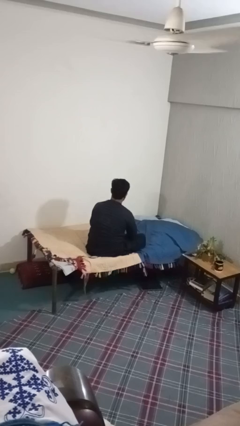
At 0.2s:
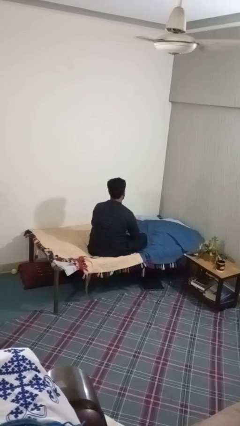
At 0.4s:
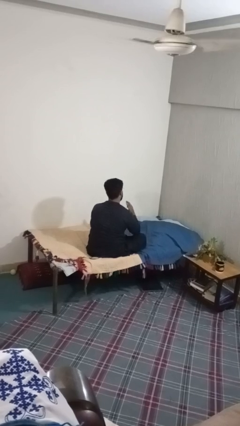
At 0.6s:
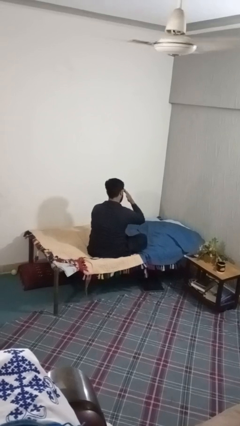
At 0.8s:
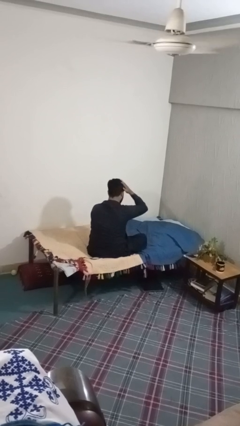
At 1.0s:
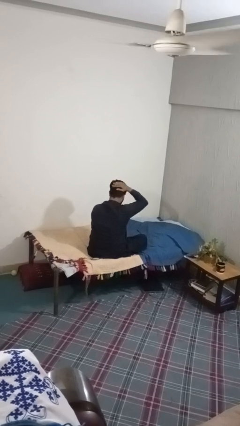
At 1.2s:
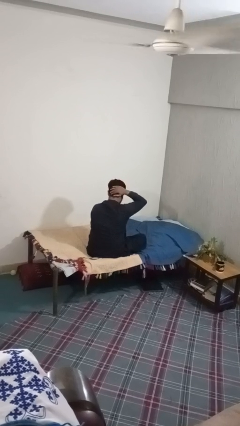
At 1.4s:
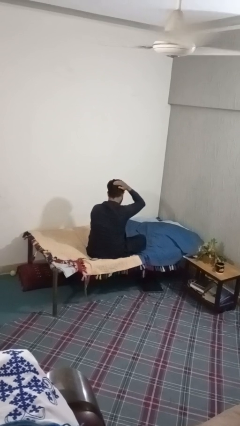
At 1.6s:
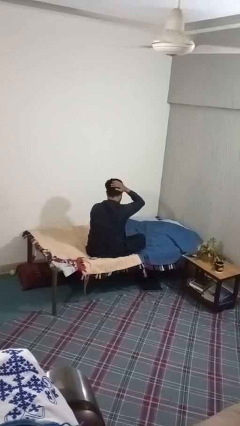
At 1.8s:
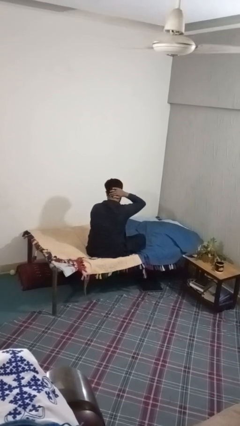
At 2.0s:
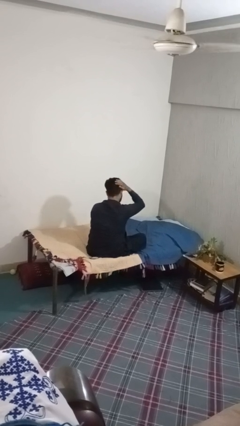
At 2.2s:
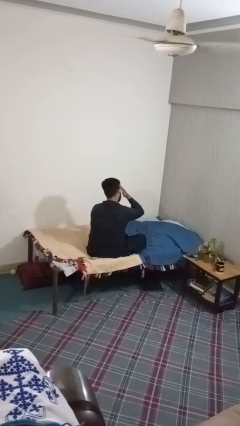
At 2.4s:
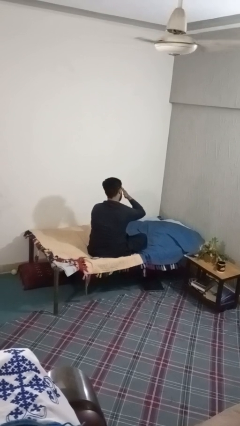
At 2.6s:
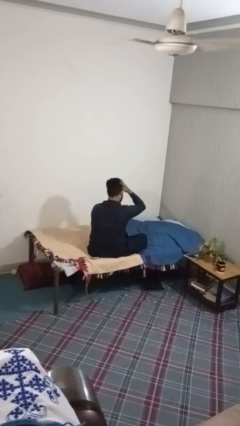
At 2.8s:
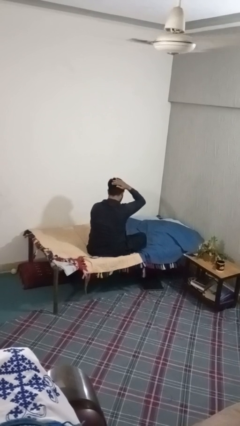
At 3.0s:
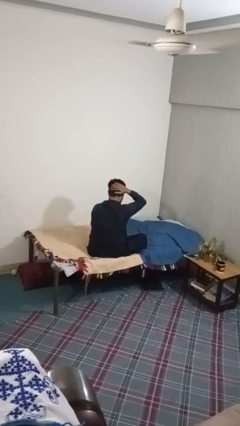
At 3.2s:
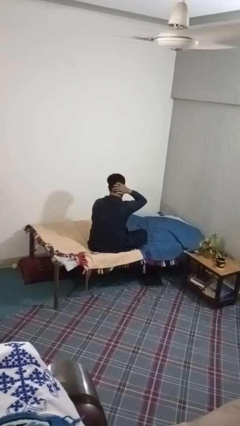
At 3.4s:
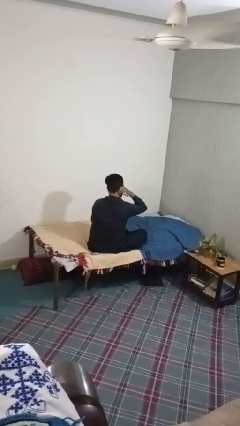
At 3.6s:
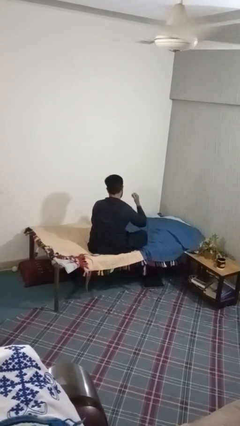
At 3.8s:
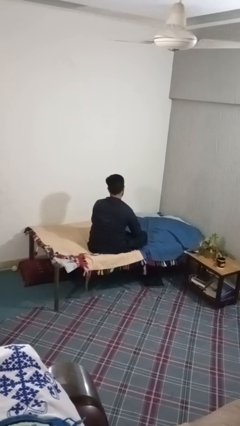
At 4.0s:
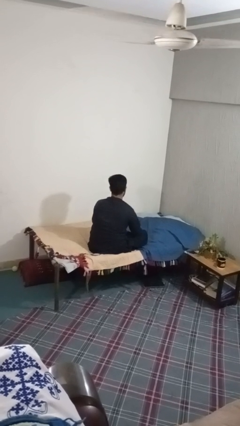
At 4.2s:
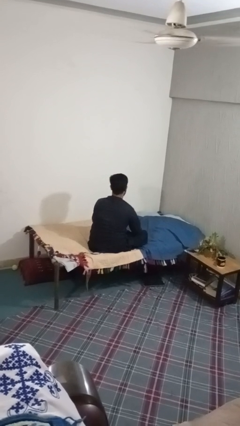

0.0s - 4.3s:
person strokes hair

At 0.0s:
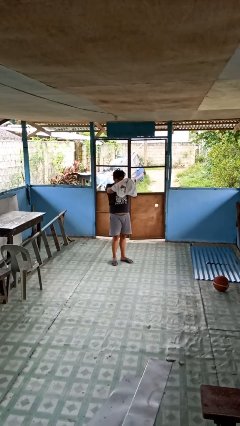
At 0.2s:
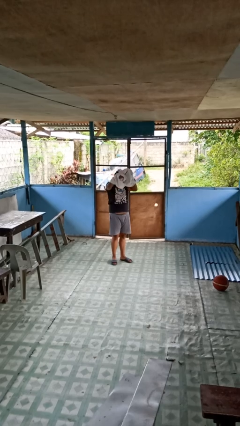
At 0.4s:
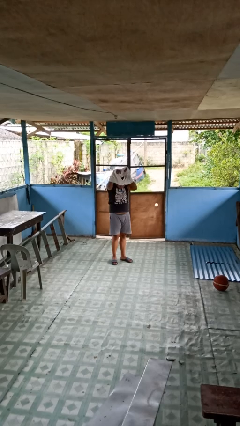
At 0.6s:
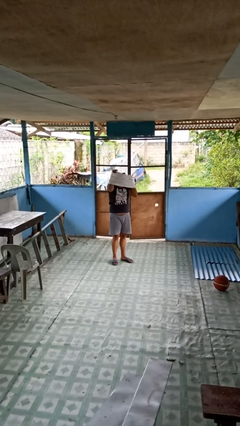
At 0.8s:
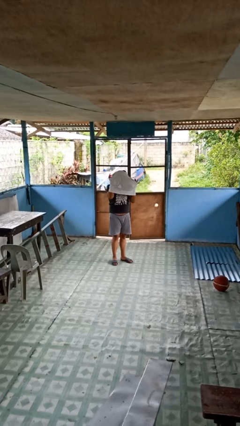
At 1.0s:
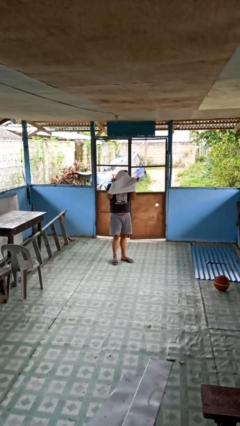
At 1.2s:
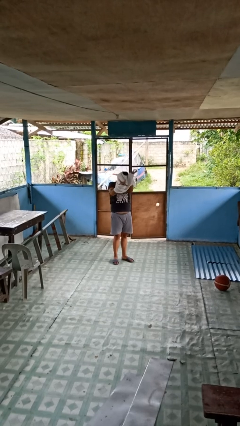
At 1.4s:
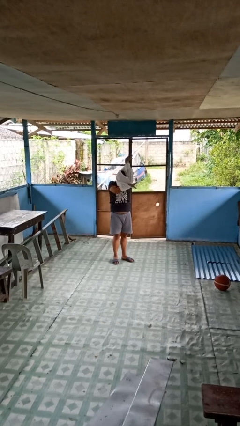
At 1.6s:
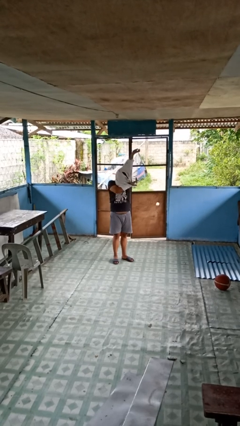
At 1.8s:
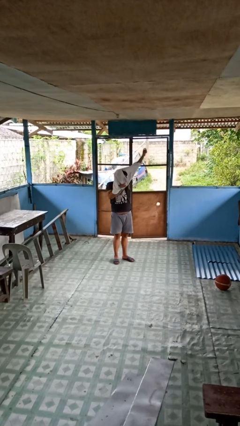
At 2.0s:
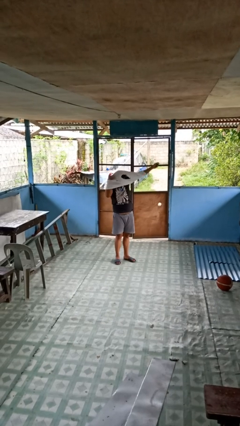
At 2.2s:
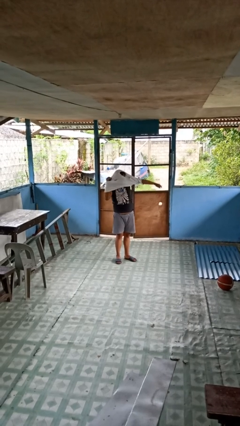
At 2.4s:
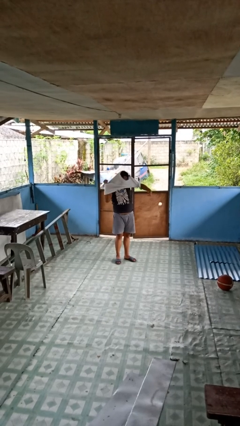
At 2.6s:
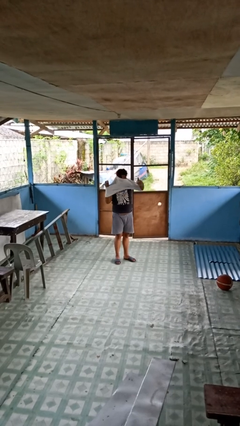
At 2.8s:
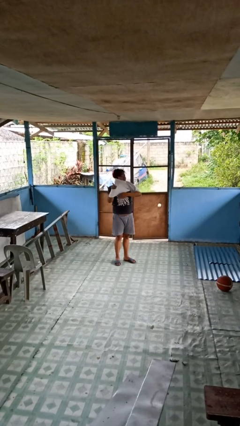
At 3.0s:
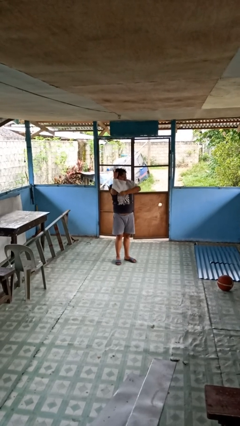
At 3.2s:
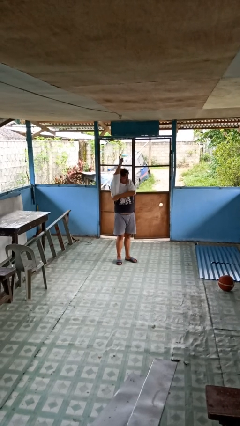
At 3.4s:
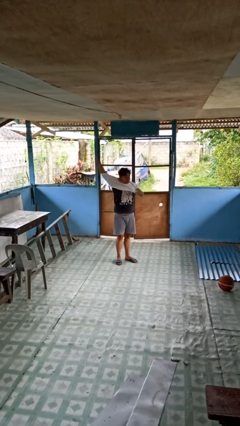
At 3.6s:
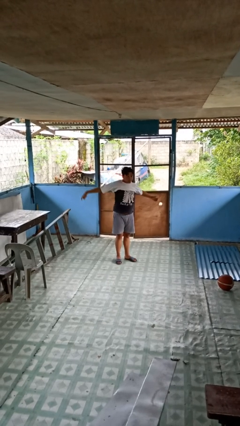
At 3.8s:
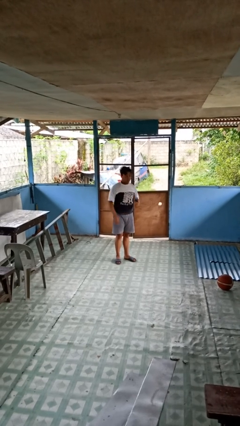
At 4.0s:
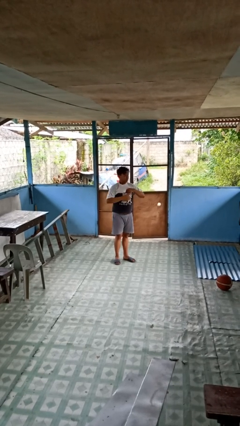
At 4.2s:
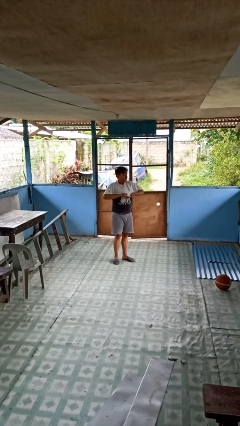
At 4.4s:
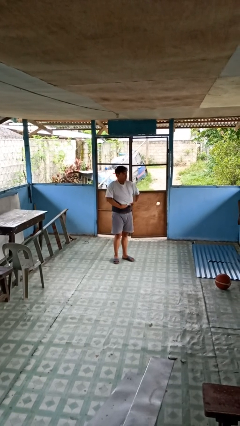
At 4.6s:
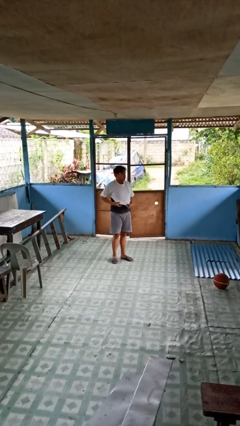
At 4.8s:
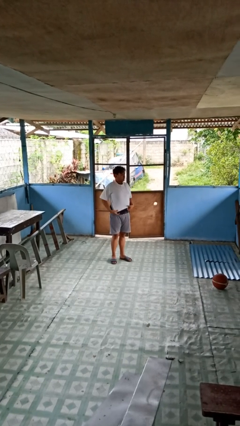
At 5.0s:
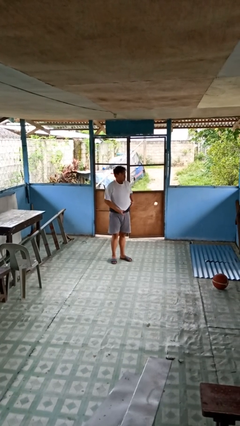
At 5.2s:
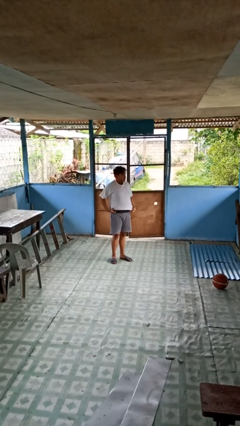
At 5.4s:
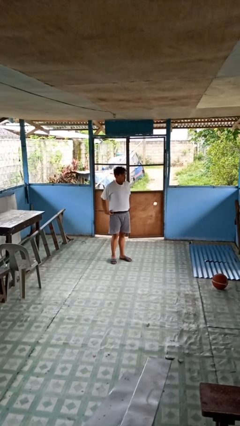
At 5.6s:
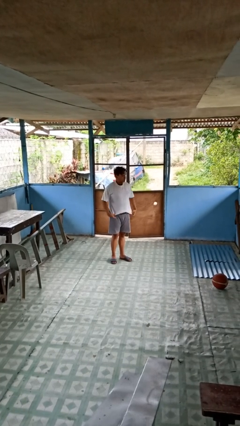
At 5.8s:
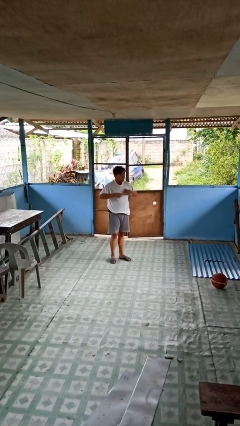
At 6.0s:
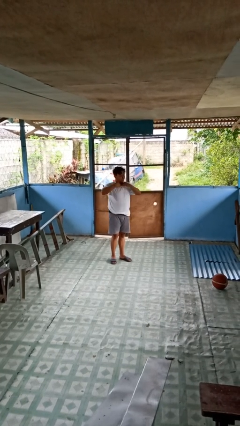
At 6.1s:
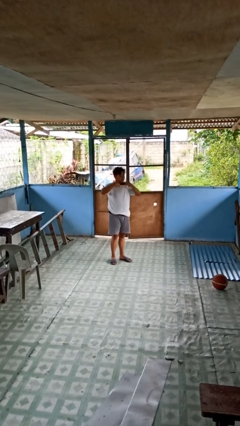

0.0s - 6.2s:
person puts on shirt

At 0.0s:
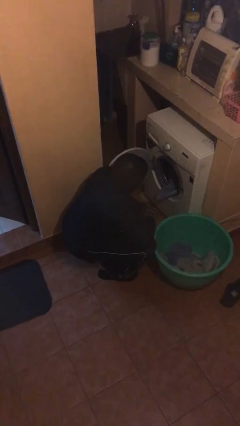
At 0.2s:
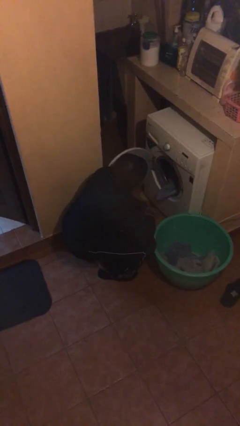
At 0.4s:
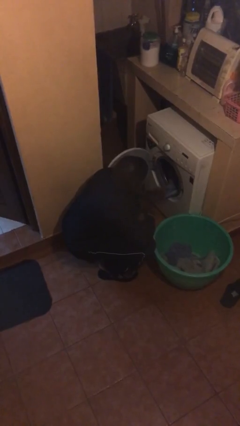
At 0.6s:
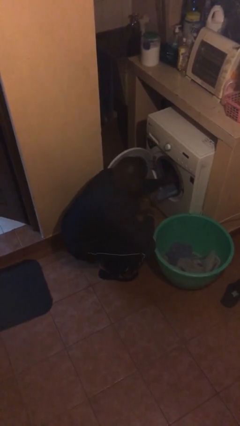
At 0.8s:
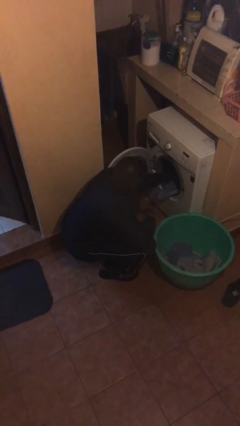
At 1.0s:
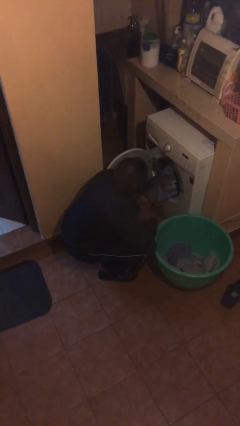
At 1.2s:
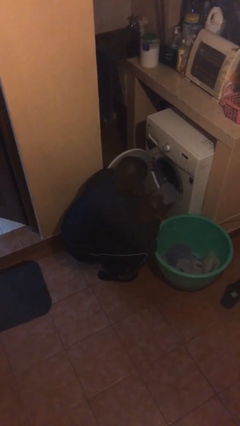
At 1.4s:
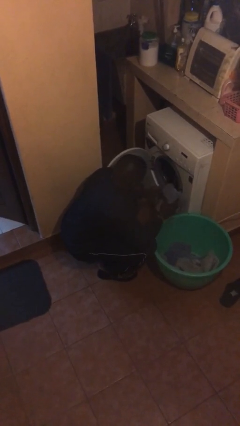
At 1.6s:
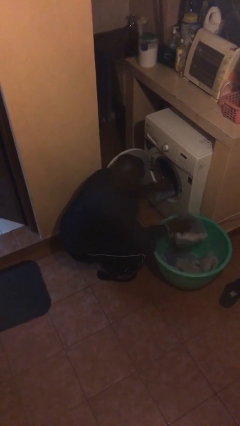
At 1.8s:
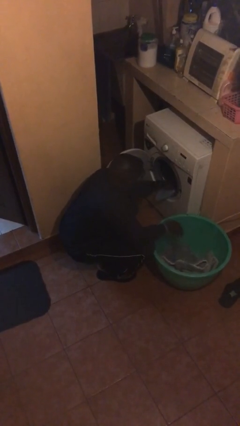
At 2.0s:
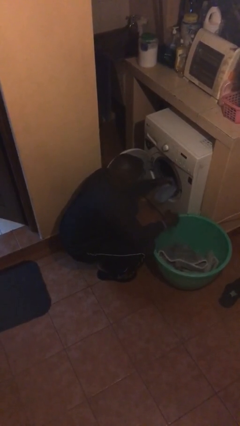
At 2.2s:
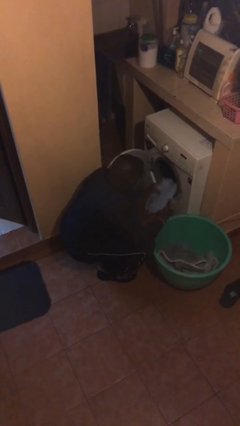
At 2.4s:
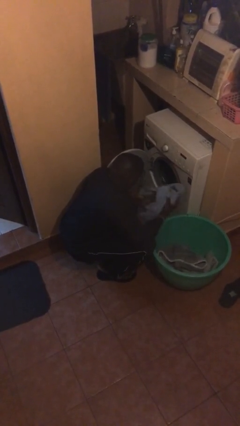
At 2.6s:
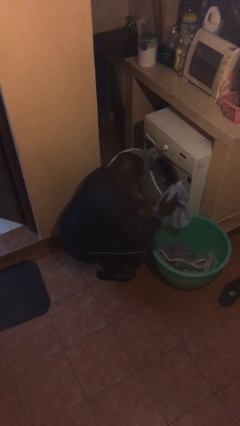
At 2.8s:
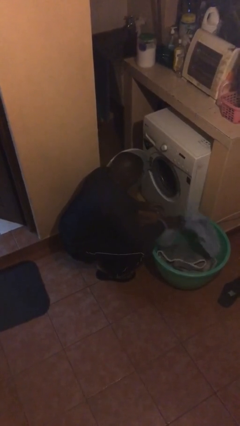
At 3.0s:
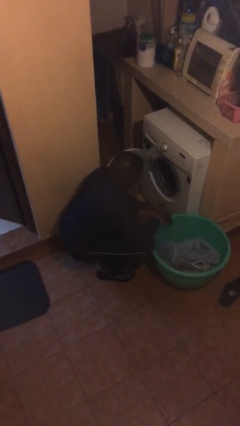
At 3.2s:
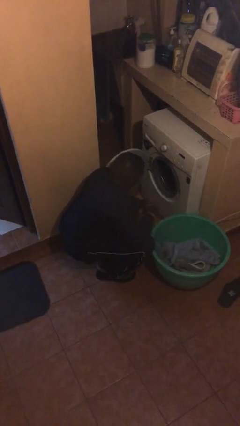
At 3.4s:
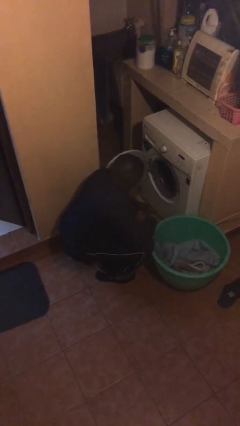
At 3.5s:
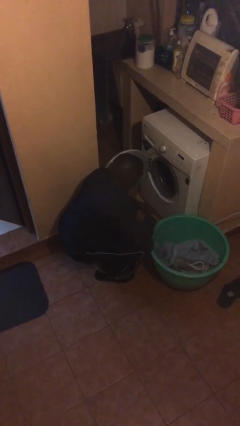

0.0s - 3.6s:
person loads clotheswasher

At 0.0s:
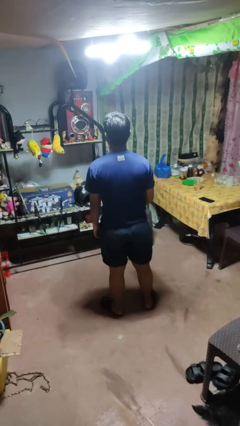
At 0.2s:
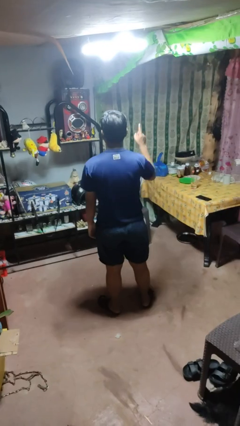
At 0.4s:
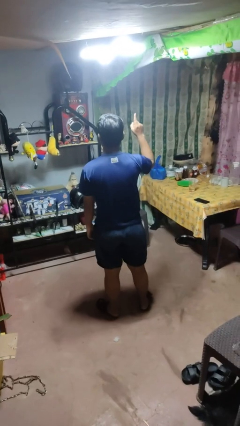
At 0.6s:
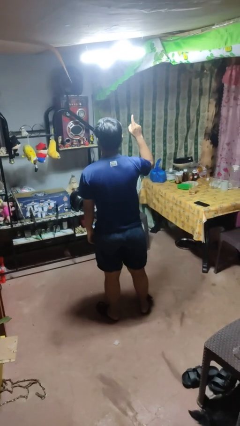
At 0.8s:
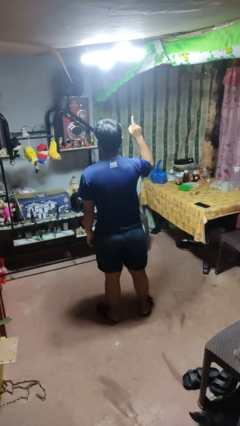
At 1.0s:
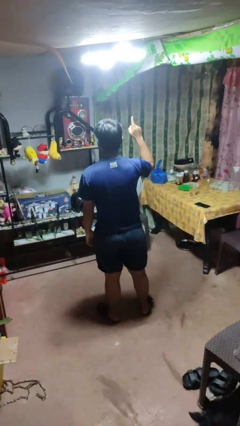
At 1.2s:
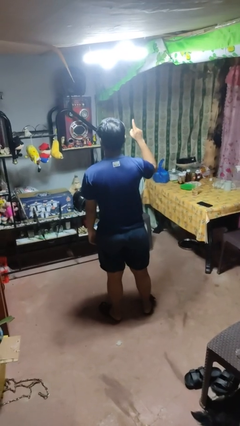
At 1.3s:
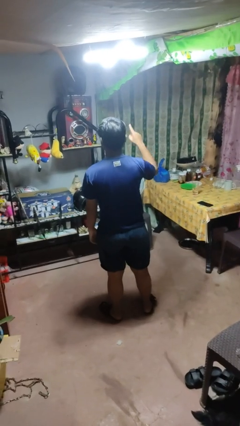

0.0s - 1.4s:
person gestures number one

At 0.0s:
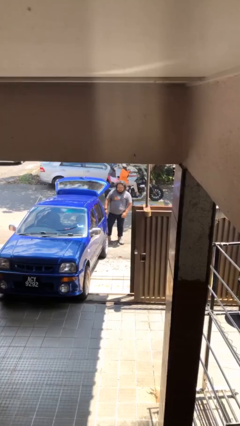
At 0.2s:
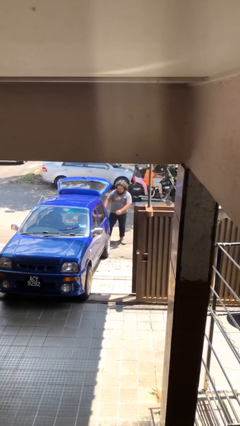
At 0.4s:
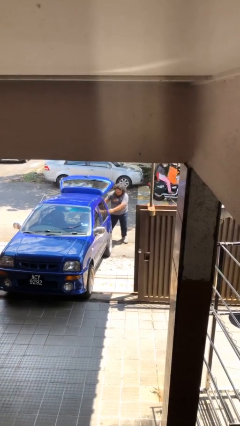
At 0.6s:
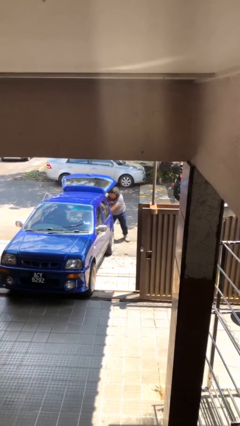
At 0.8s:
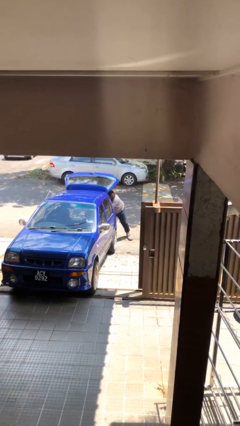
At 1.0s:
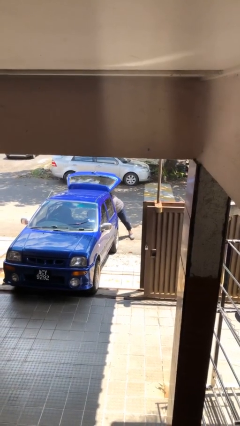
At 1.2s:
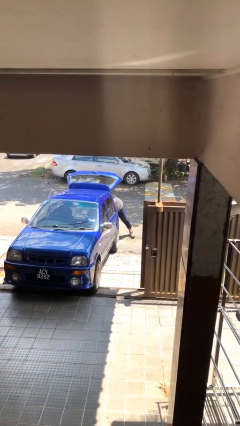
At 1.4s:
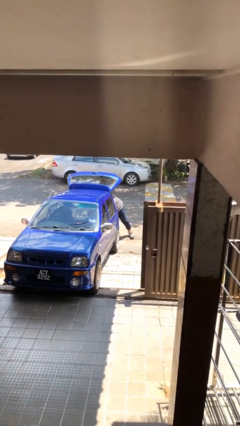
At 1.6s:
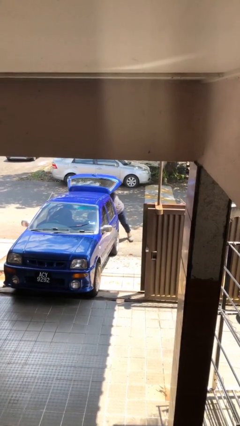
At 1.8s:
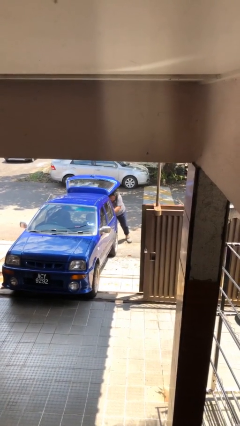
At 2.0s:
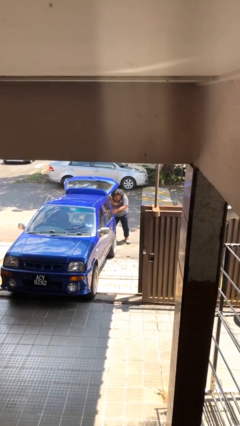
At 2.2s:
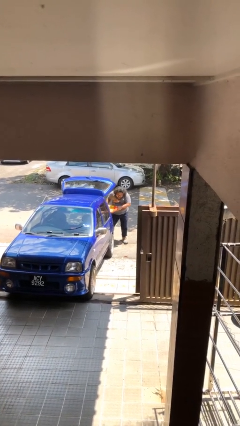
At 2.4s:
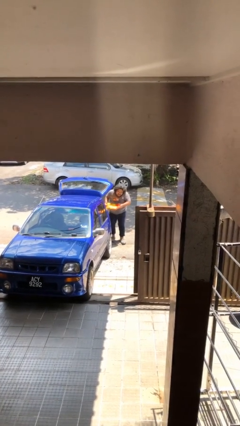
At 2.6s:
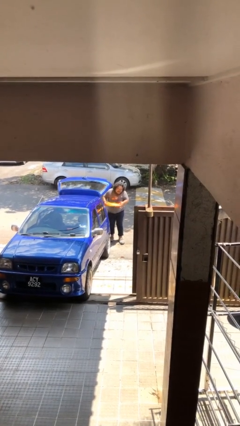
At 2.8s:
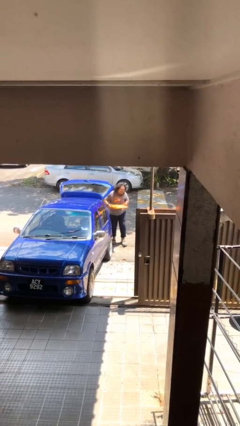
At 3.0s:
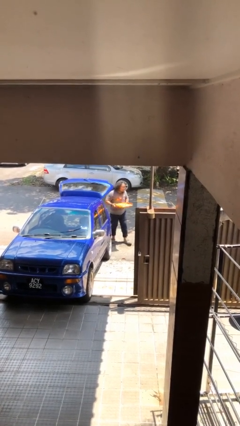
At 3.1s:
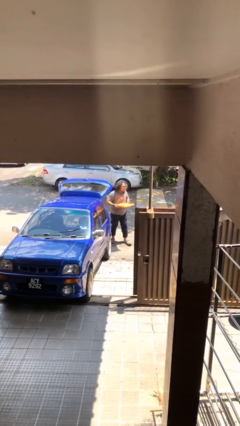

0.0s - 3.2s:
person unloads car
